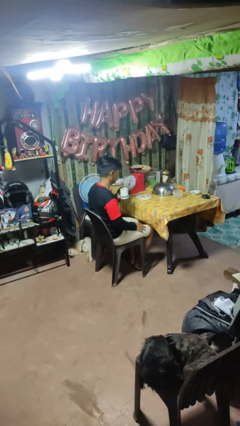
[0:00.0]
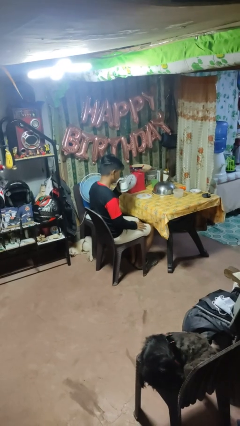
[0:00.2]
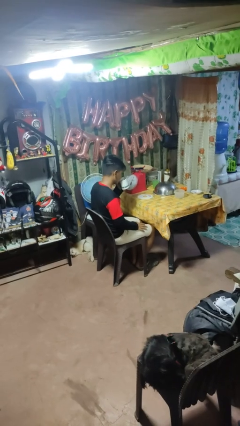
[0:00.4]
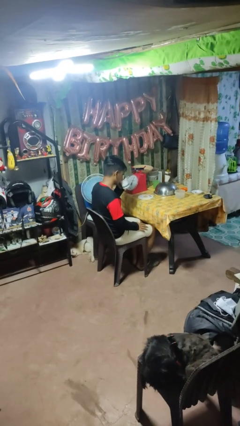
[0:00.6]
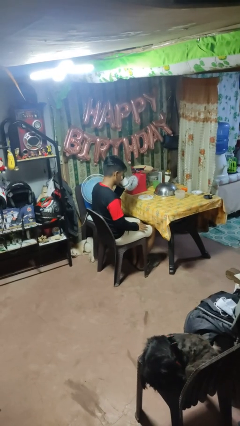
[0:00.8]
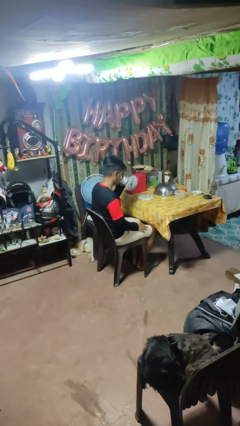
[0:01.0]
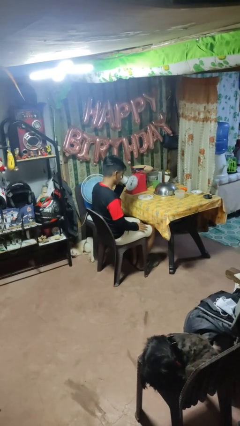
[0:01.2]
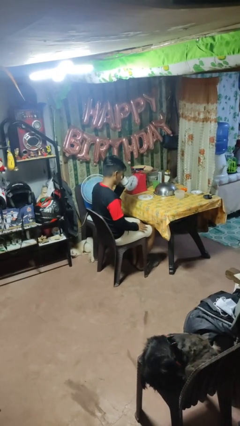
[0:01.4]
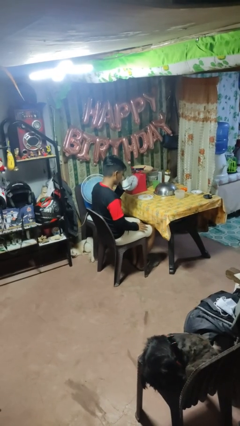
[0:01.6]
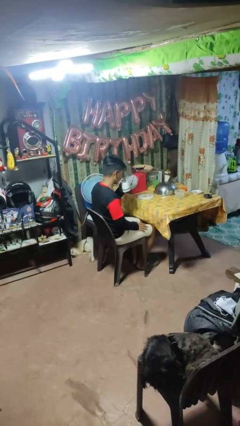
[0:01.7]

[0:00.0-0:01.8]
person drinks from mug

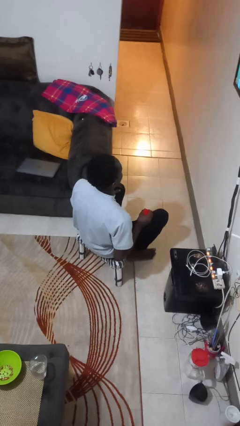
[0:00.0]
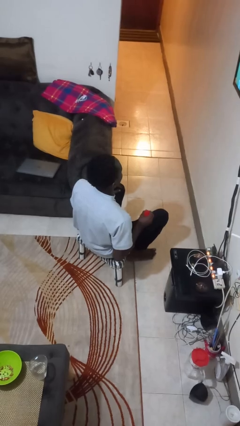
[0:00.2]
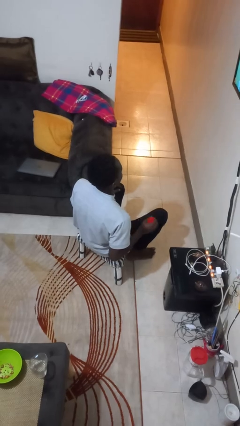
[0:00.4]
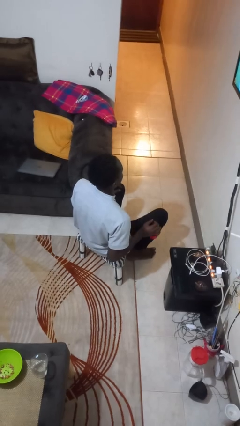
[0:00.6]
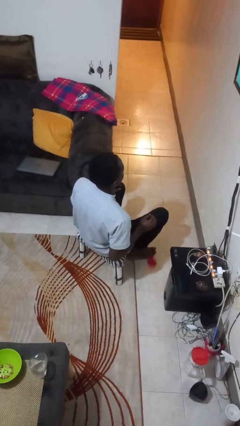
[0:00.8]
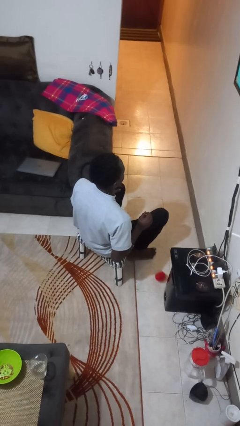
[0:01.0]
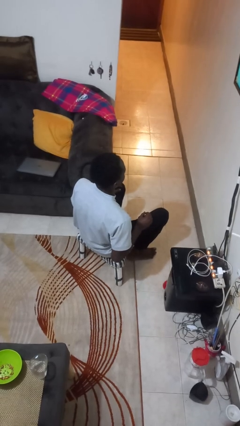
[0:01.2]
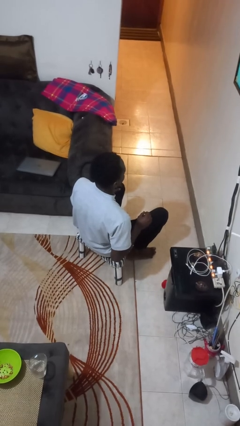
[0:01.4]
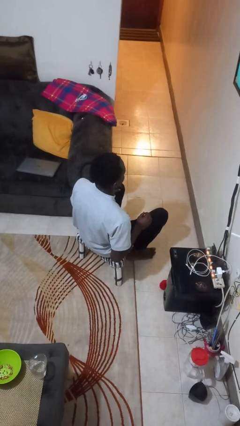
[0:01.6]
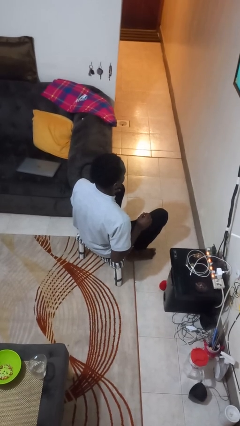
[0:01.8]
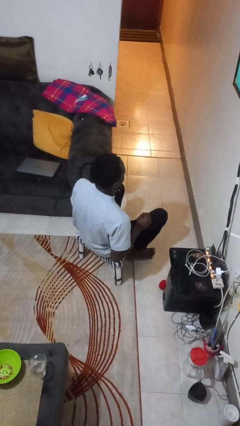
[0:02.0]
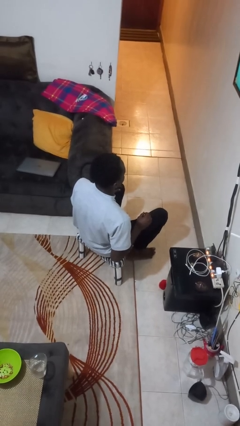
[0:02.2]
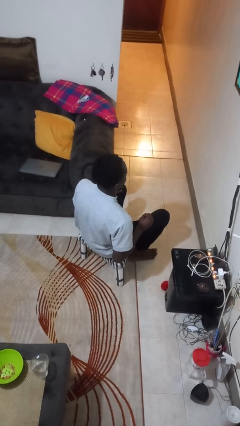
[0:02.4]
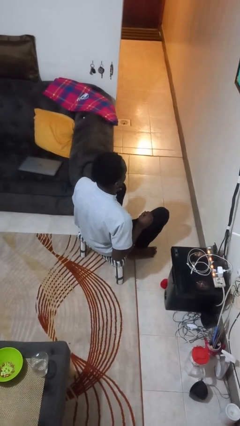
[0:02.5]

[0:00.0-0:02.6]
person drops object

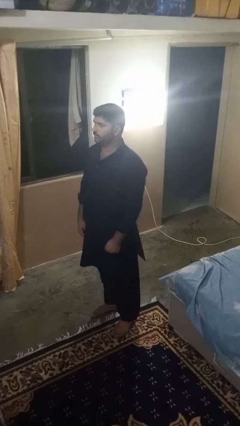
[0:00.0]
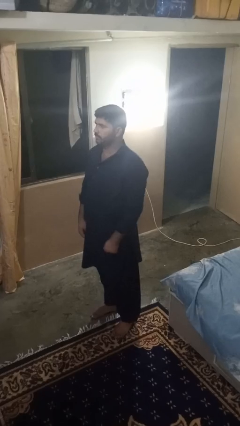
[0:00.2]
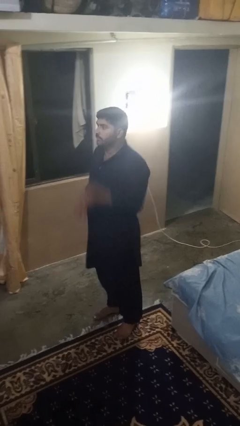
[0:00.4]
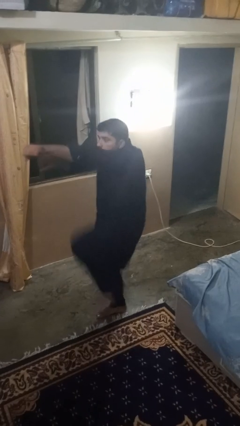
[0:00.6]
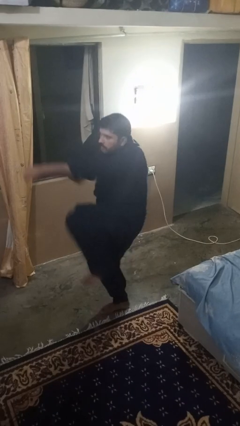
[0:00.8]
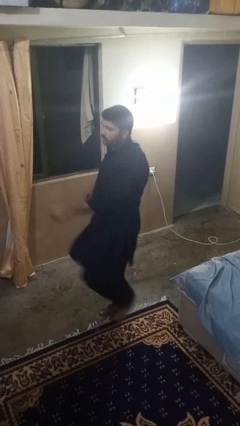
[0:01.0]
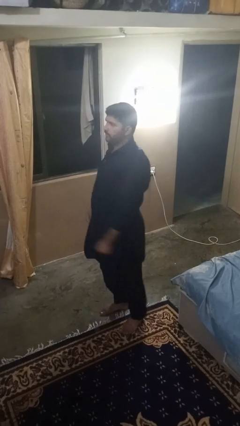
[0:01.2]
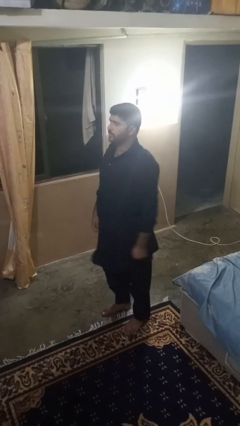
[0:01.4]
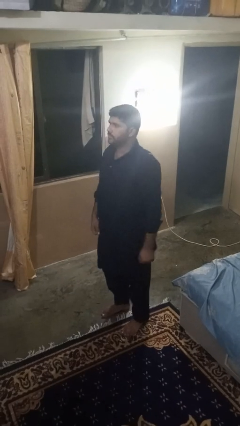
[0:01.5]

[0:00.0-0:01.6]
person karate chop

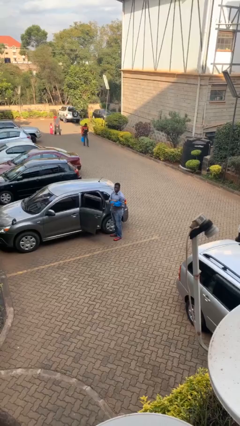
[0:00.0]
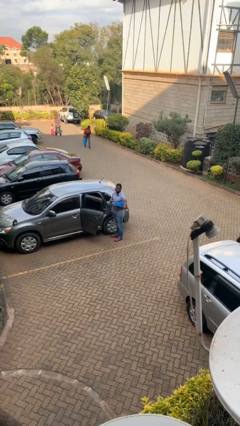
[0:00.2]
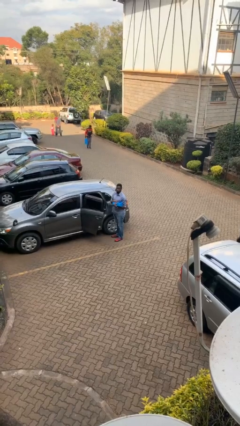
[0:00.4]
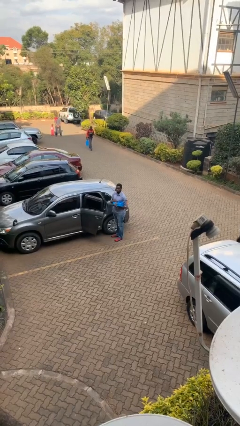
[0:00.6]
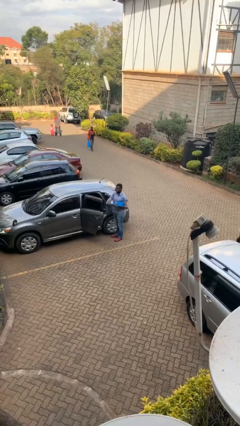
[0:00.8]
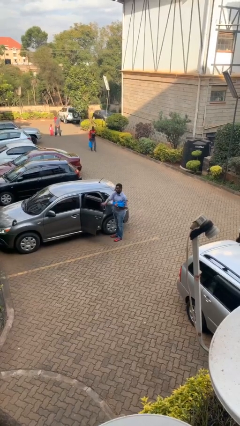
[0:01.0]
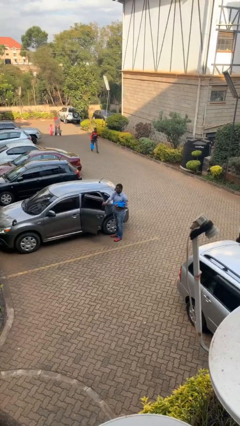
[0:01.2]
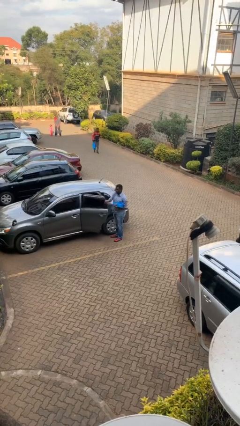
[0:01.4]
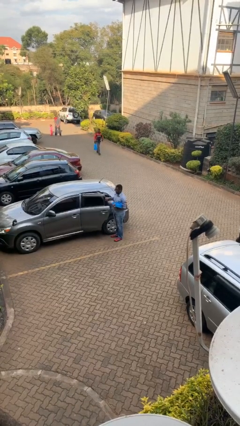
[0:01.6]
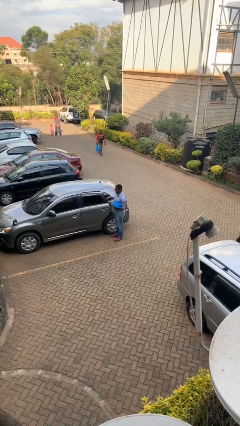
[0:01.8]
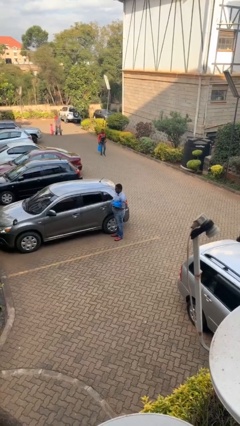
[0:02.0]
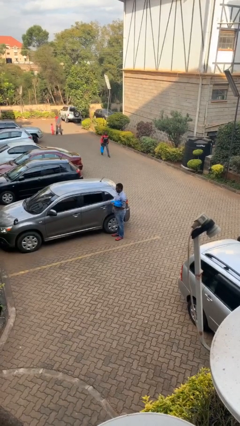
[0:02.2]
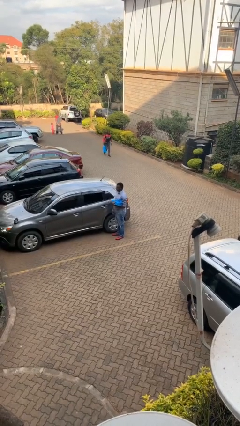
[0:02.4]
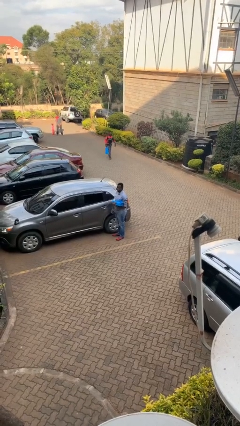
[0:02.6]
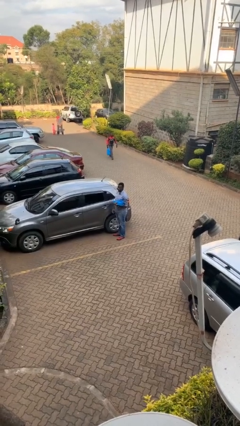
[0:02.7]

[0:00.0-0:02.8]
person closes car door

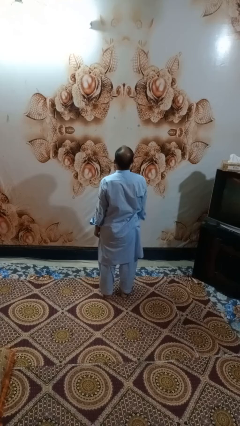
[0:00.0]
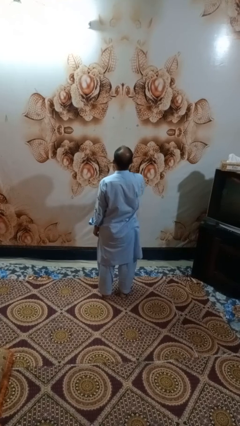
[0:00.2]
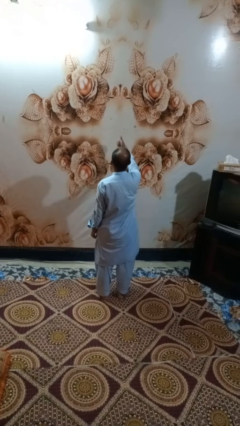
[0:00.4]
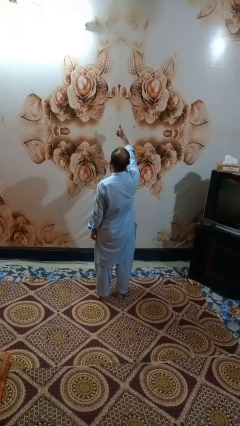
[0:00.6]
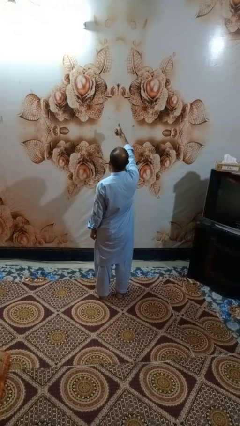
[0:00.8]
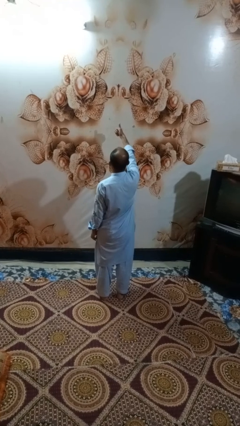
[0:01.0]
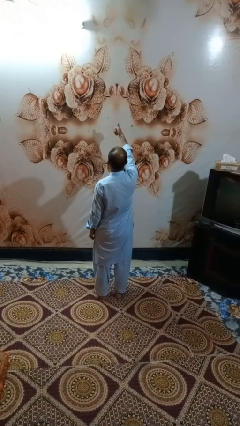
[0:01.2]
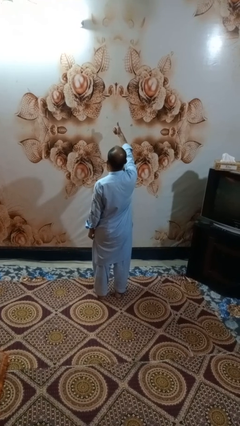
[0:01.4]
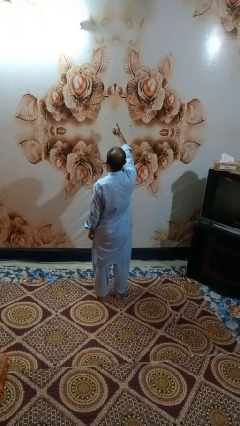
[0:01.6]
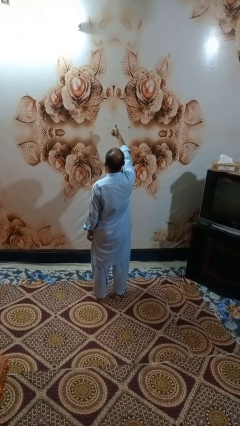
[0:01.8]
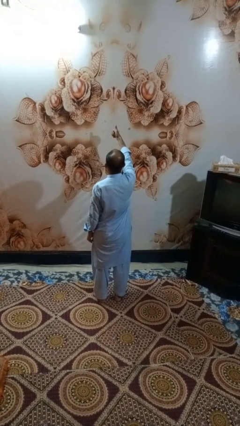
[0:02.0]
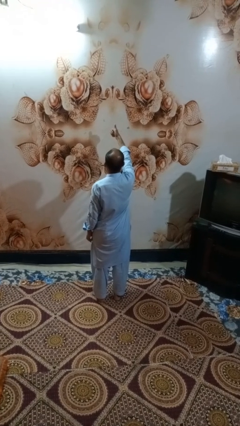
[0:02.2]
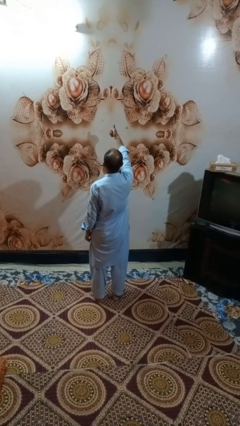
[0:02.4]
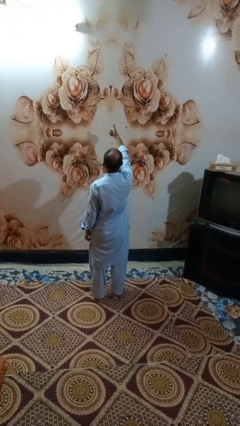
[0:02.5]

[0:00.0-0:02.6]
person gestures thumbs up

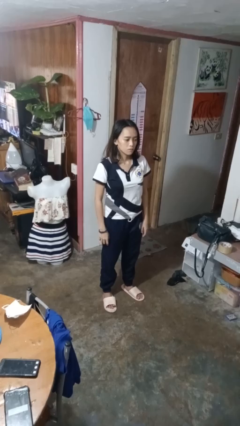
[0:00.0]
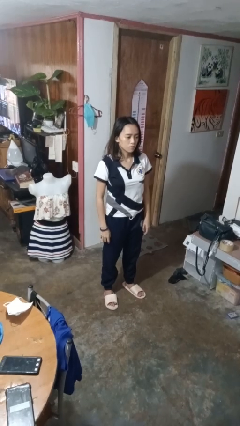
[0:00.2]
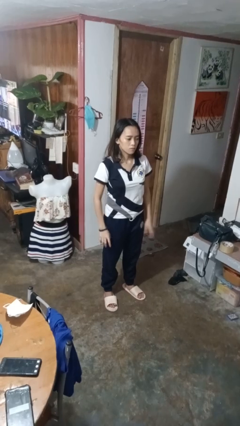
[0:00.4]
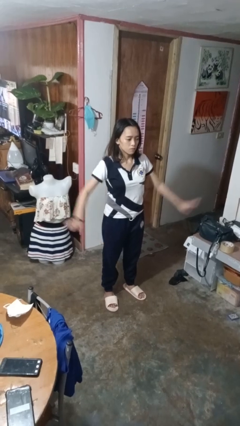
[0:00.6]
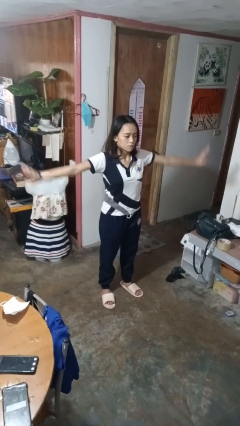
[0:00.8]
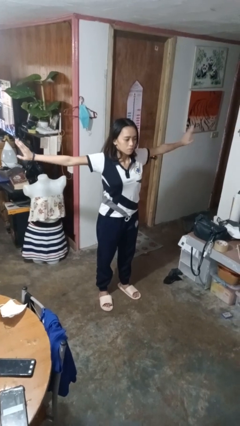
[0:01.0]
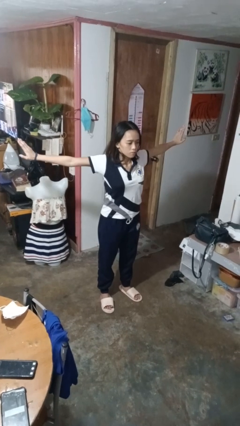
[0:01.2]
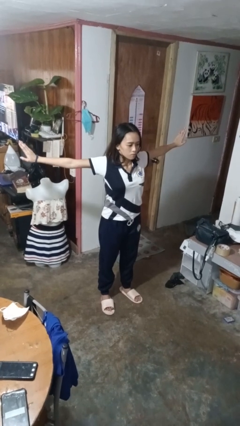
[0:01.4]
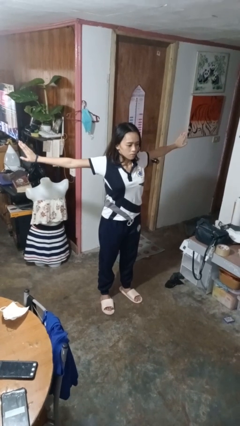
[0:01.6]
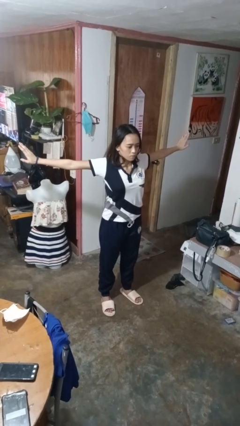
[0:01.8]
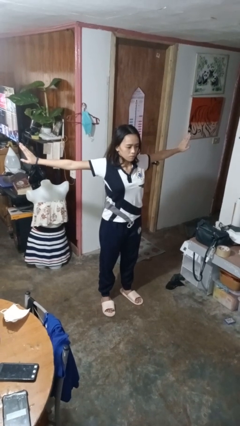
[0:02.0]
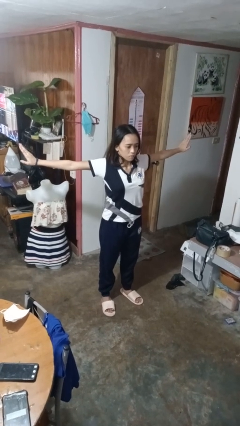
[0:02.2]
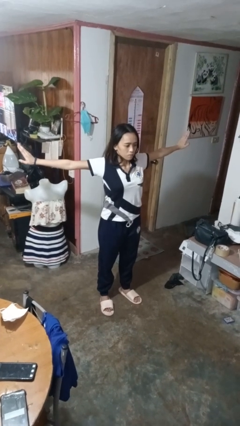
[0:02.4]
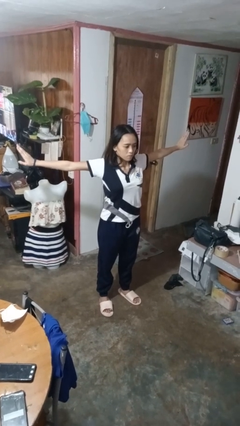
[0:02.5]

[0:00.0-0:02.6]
person stretches arms to side

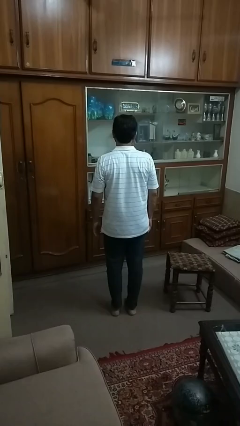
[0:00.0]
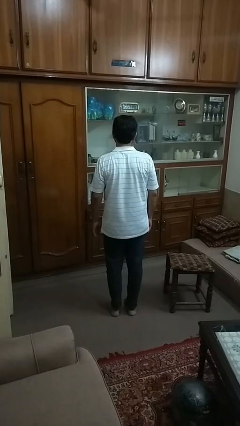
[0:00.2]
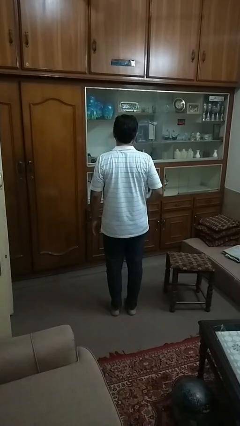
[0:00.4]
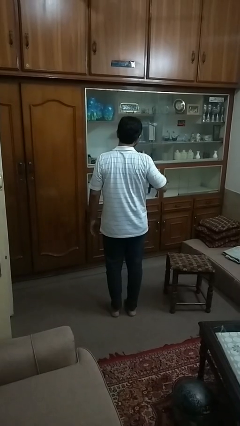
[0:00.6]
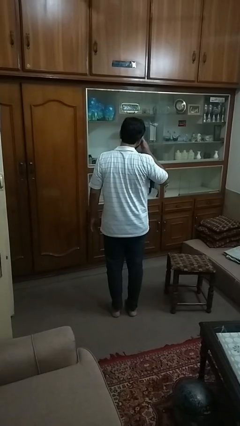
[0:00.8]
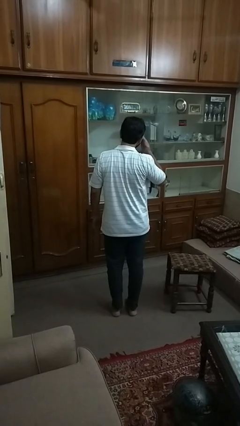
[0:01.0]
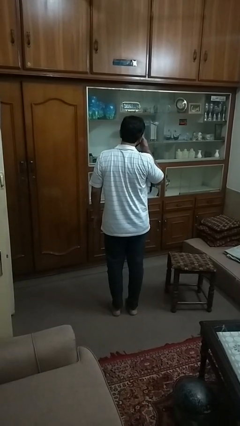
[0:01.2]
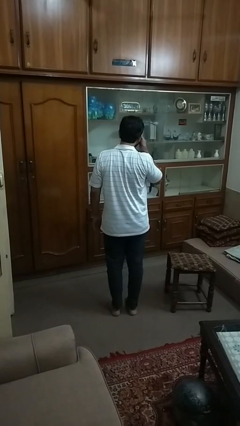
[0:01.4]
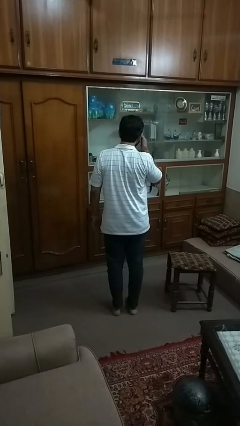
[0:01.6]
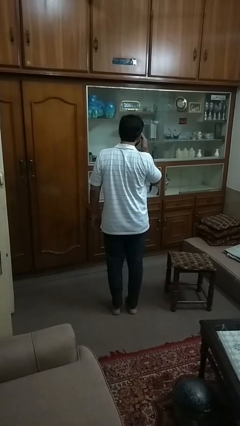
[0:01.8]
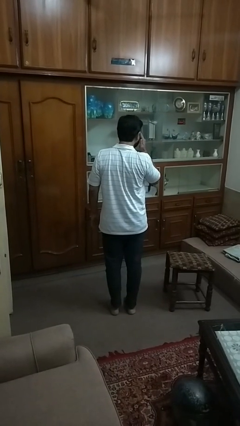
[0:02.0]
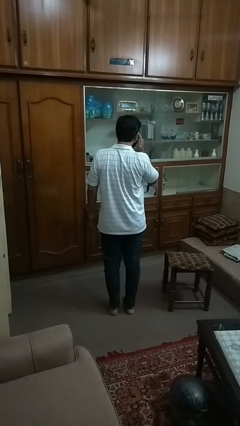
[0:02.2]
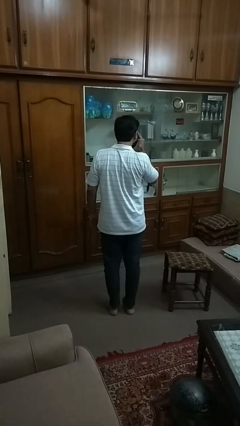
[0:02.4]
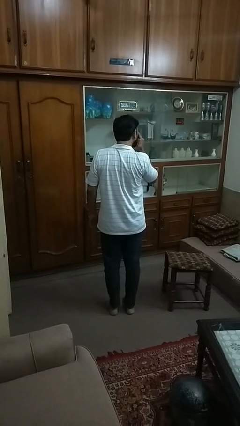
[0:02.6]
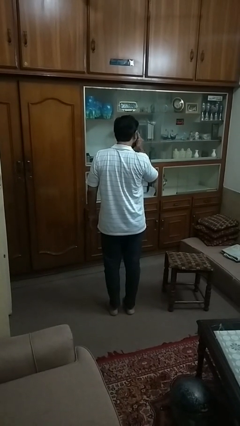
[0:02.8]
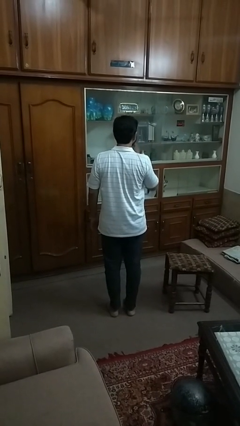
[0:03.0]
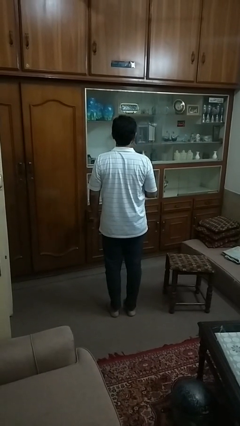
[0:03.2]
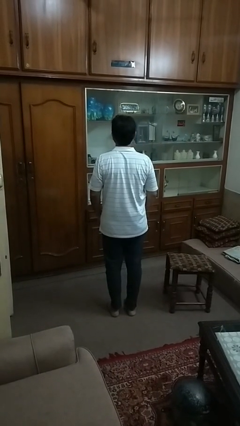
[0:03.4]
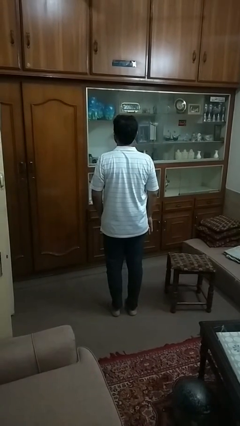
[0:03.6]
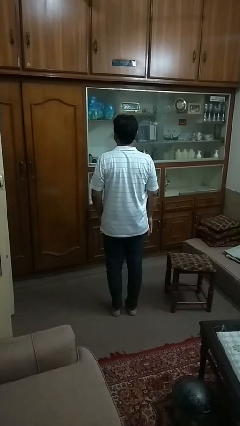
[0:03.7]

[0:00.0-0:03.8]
person rubs eyes
